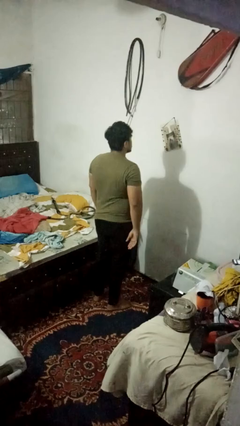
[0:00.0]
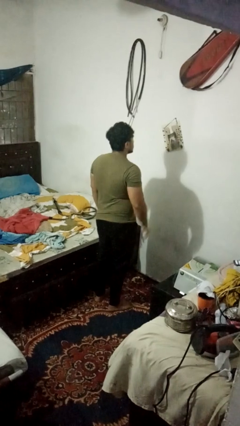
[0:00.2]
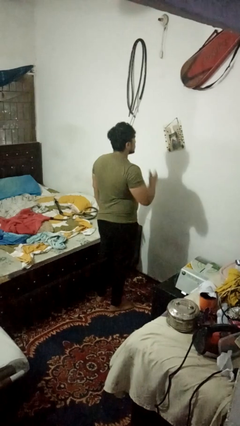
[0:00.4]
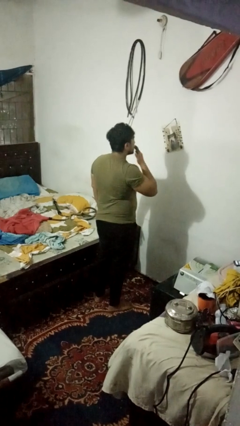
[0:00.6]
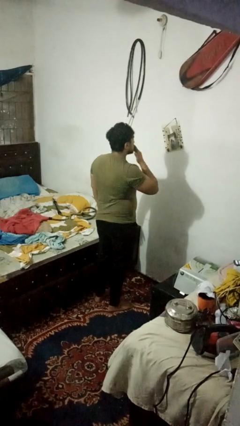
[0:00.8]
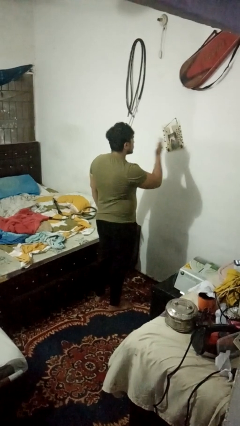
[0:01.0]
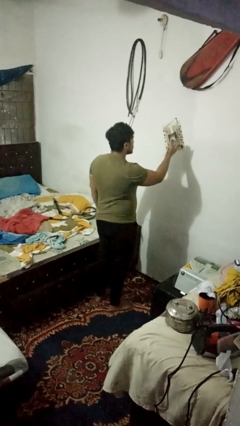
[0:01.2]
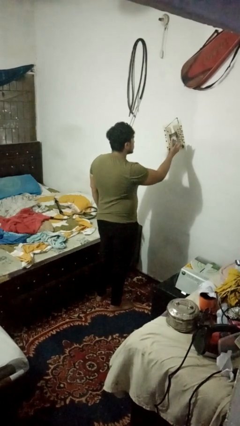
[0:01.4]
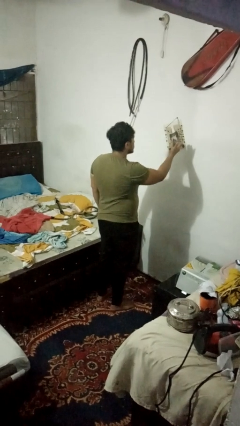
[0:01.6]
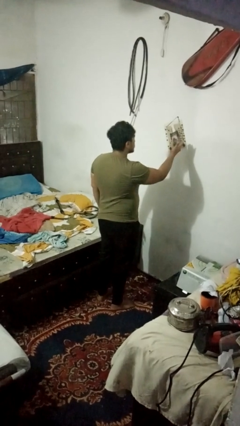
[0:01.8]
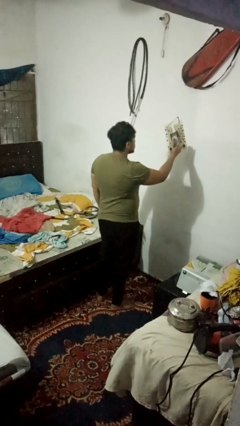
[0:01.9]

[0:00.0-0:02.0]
person gestures blow kiss

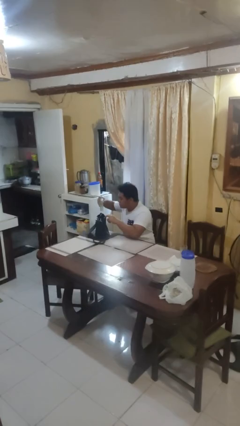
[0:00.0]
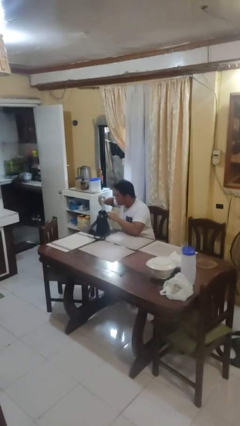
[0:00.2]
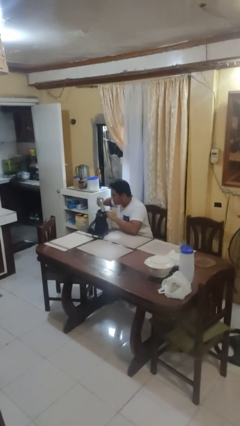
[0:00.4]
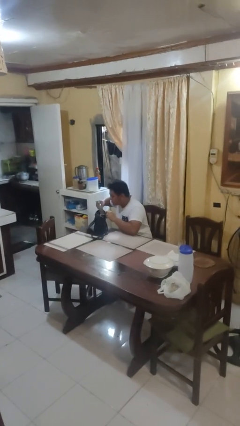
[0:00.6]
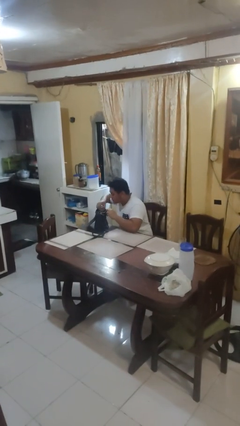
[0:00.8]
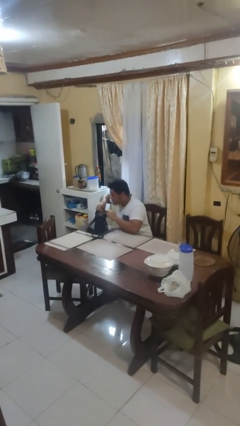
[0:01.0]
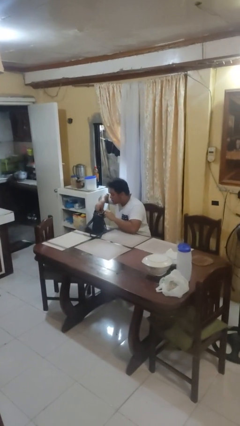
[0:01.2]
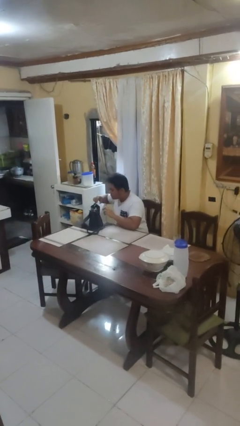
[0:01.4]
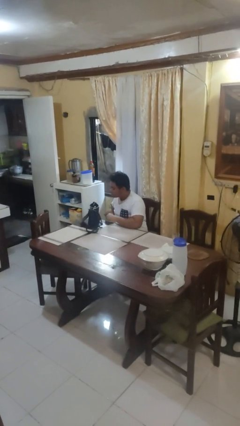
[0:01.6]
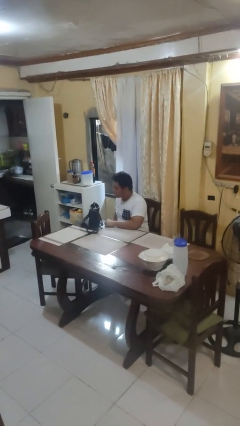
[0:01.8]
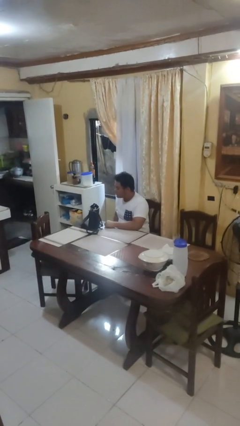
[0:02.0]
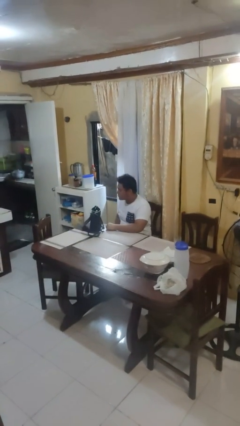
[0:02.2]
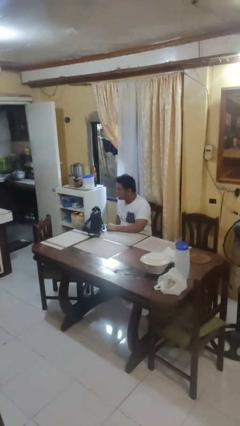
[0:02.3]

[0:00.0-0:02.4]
person puts object into purse

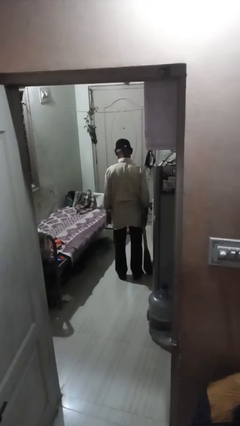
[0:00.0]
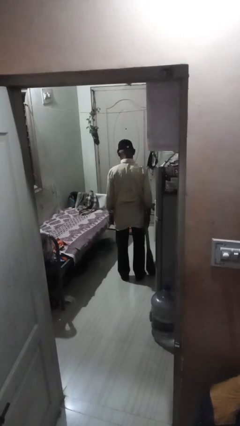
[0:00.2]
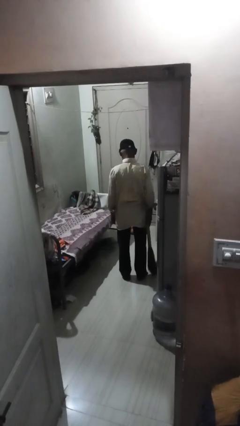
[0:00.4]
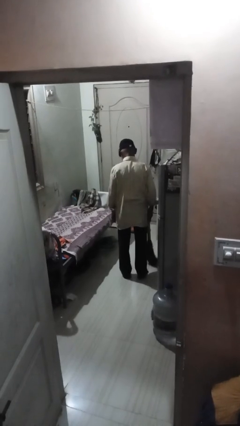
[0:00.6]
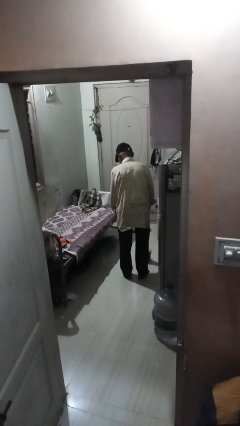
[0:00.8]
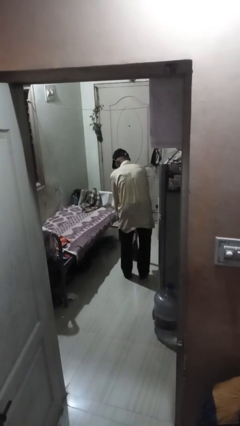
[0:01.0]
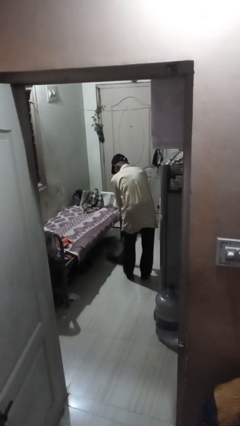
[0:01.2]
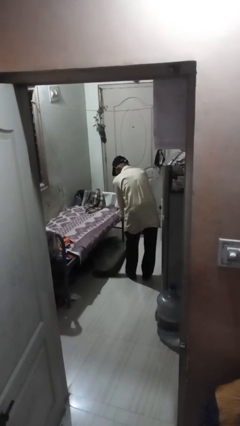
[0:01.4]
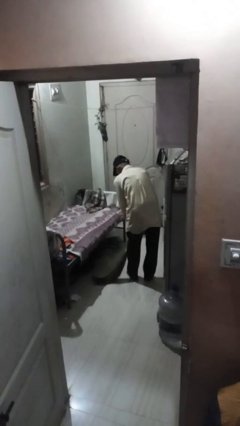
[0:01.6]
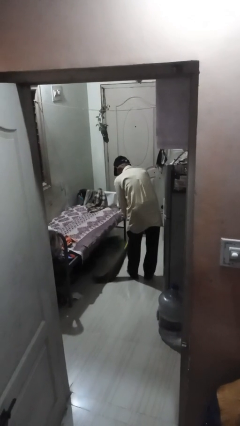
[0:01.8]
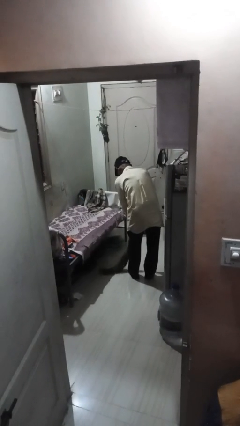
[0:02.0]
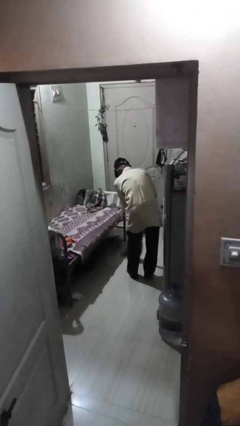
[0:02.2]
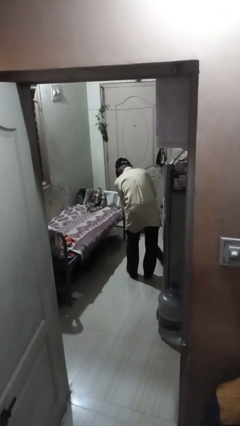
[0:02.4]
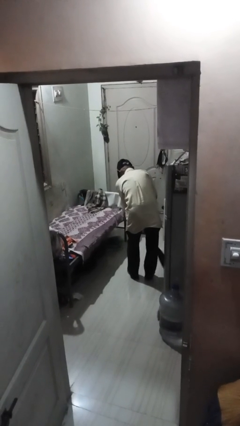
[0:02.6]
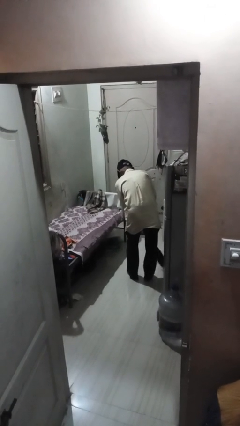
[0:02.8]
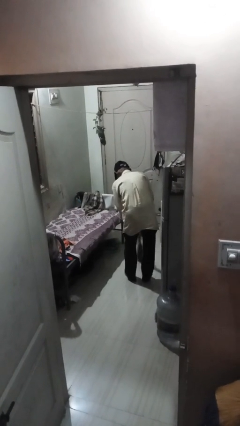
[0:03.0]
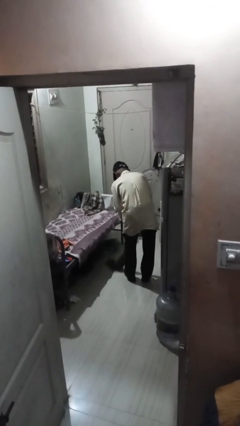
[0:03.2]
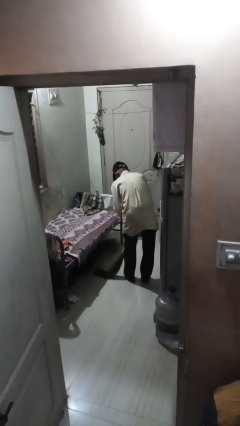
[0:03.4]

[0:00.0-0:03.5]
person sweeps floor

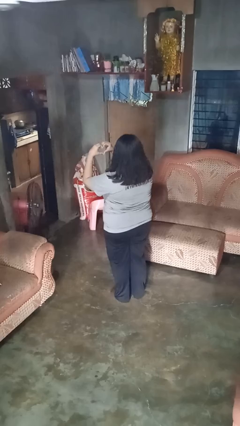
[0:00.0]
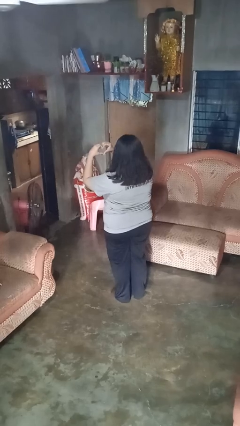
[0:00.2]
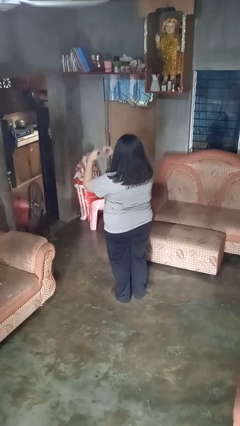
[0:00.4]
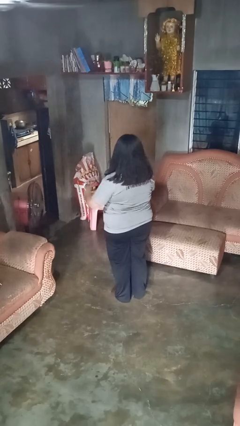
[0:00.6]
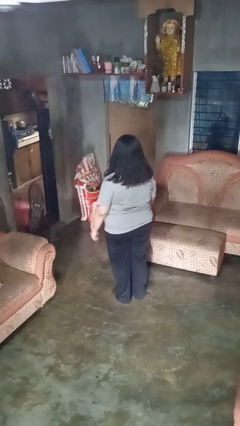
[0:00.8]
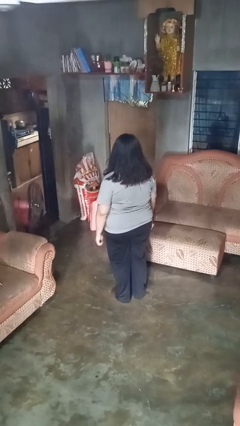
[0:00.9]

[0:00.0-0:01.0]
person gestures heart

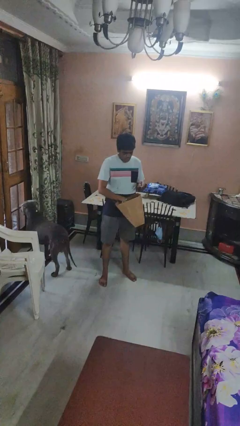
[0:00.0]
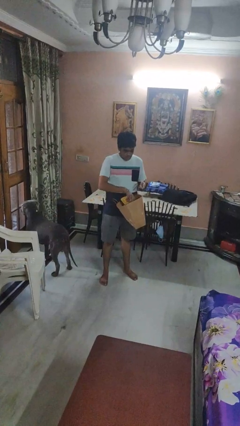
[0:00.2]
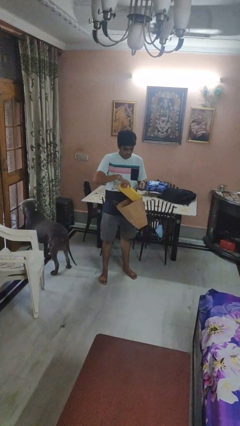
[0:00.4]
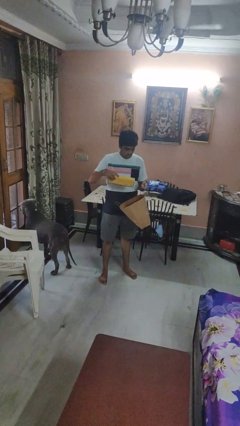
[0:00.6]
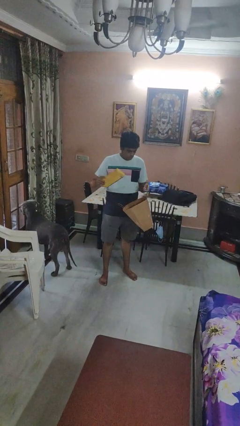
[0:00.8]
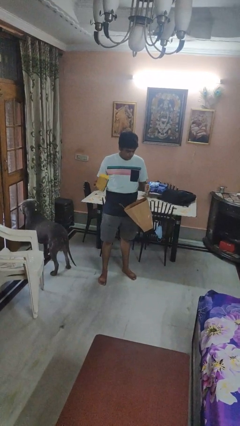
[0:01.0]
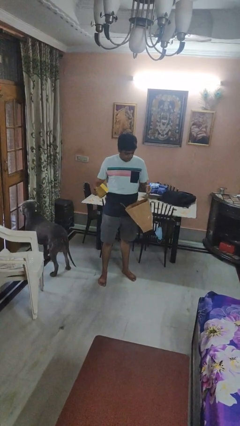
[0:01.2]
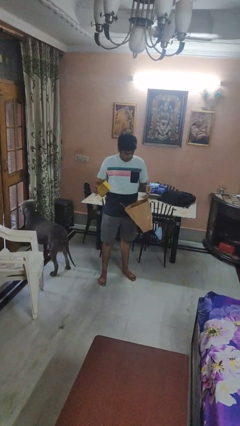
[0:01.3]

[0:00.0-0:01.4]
person takes object from bag

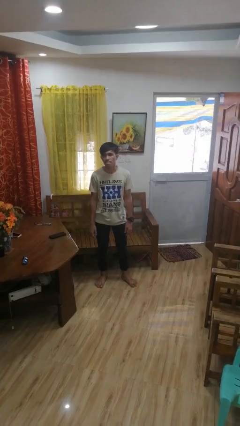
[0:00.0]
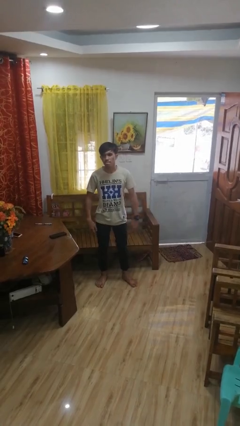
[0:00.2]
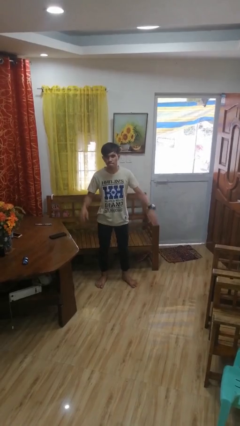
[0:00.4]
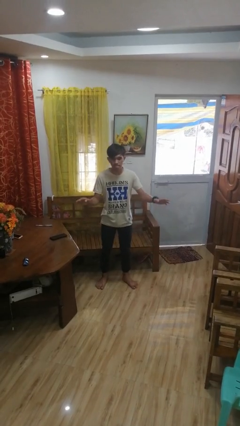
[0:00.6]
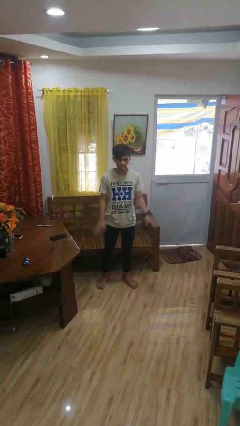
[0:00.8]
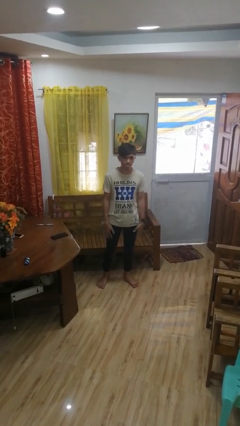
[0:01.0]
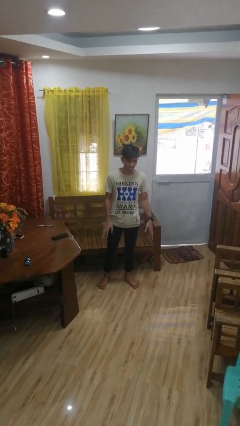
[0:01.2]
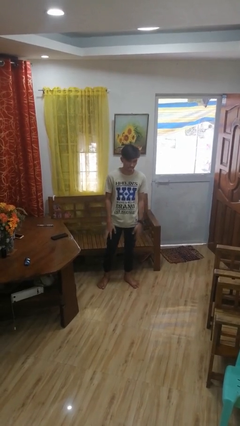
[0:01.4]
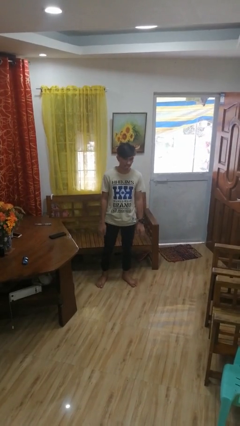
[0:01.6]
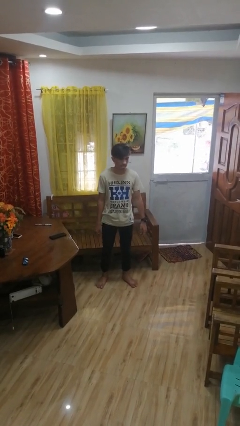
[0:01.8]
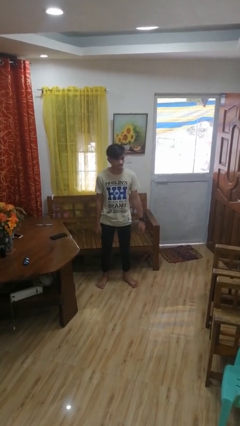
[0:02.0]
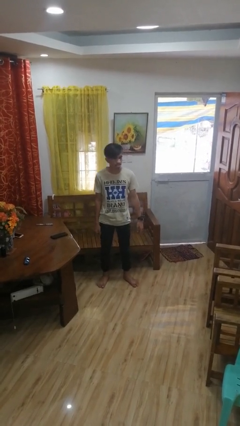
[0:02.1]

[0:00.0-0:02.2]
person slaps hands on thighs

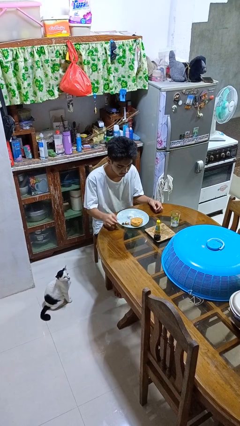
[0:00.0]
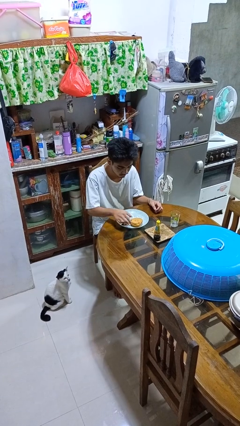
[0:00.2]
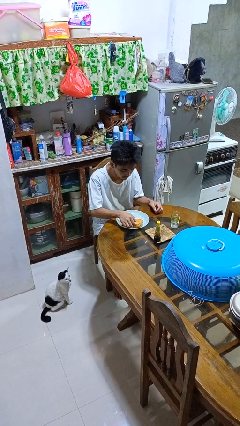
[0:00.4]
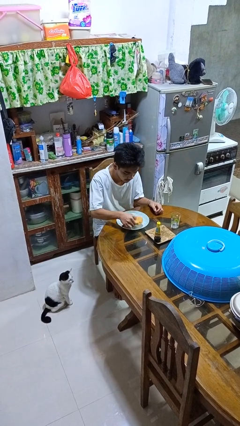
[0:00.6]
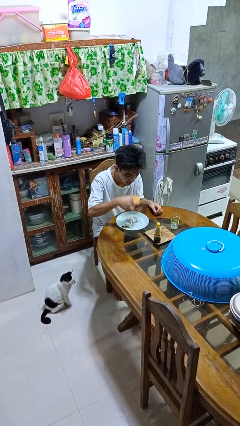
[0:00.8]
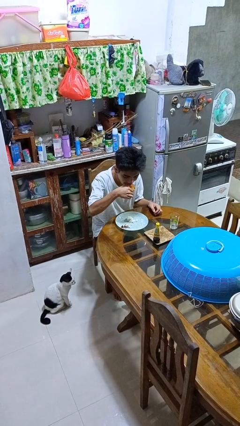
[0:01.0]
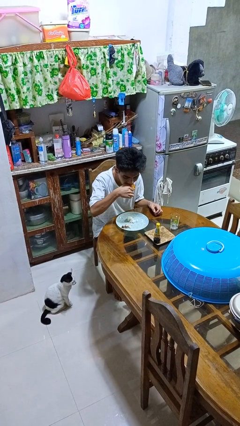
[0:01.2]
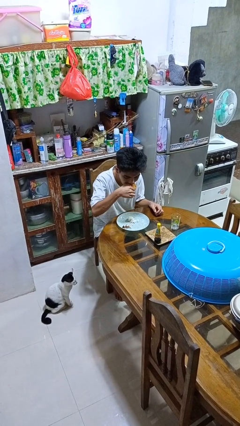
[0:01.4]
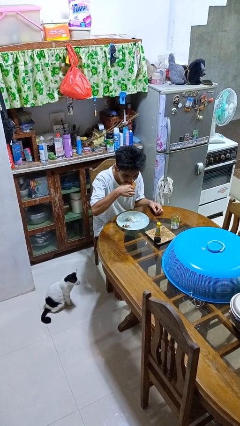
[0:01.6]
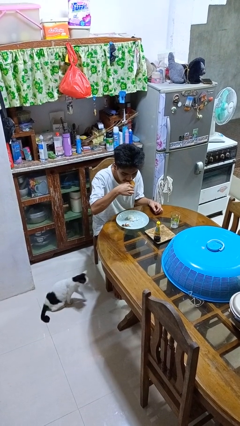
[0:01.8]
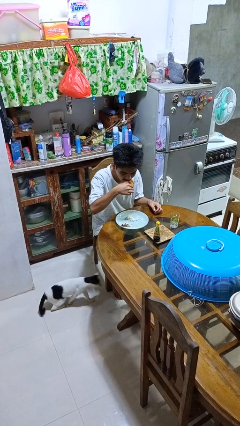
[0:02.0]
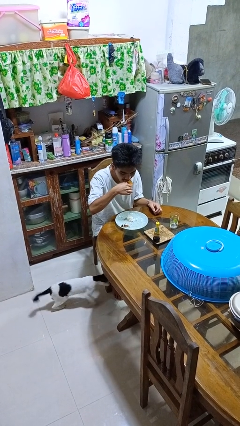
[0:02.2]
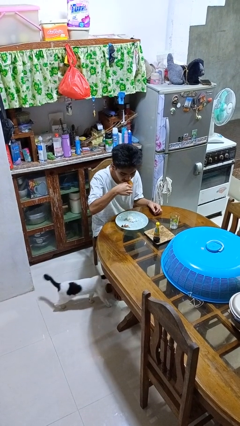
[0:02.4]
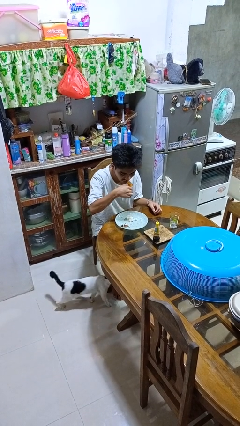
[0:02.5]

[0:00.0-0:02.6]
person eats with hands

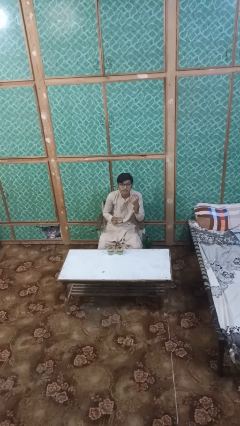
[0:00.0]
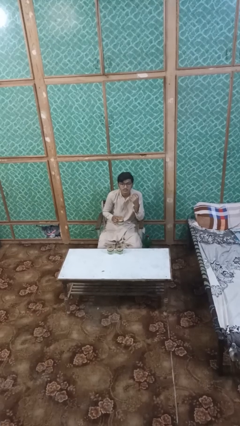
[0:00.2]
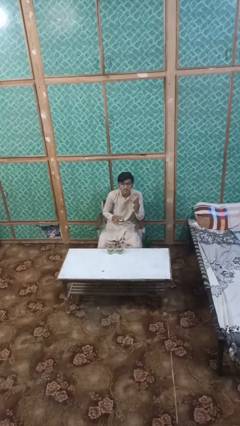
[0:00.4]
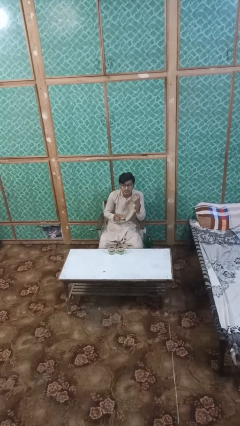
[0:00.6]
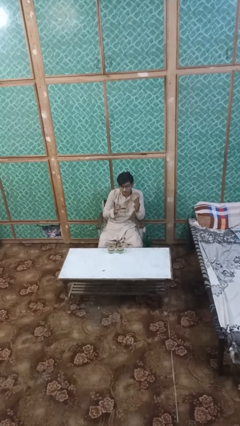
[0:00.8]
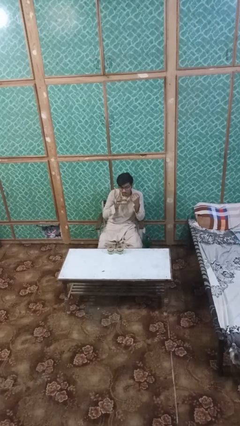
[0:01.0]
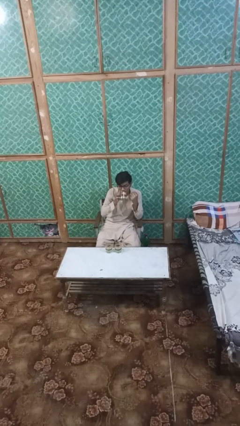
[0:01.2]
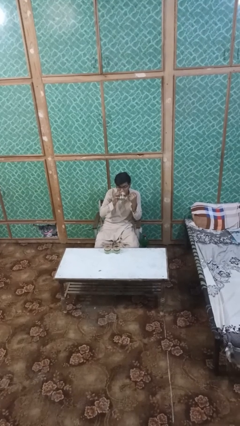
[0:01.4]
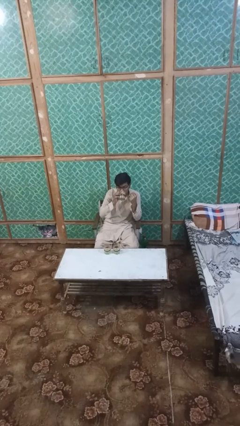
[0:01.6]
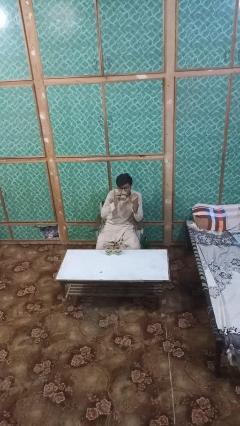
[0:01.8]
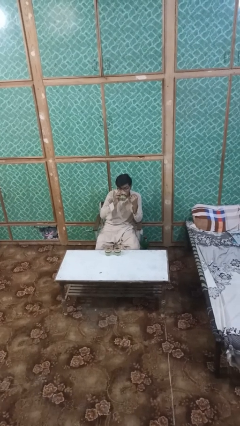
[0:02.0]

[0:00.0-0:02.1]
person drinks from shotglass
